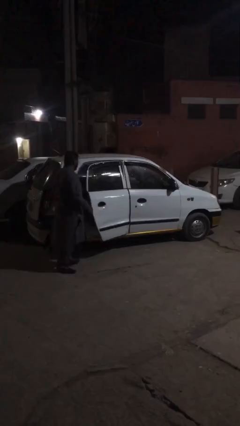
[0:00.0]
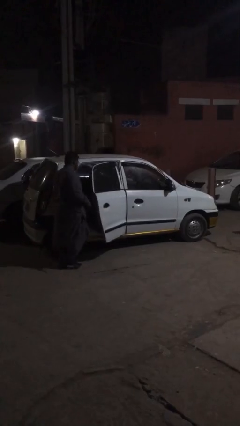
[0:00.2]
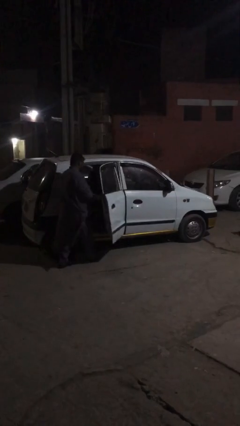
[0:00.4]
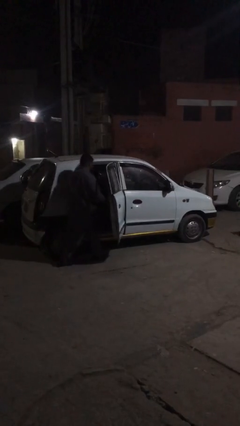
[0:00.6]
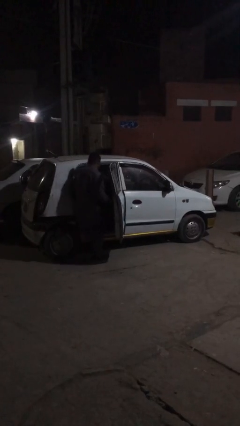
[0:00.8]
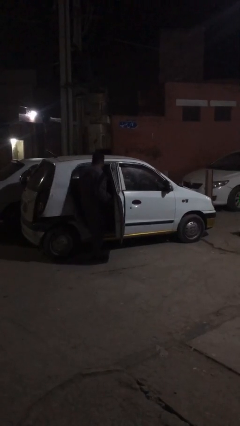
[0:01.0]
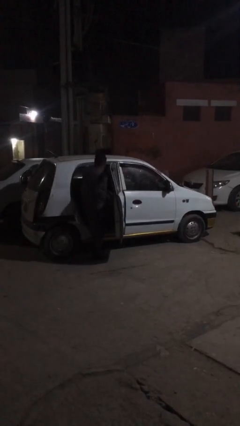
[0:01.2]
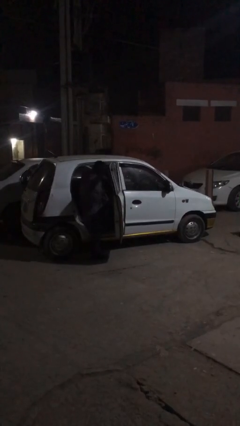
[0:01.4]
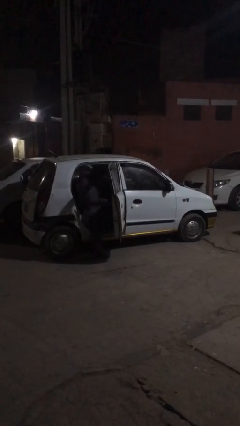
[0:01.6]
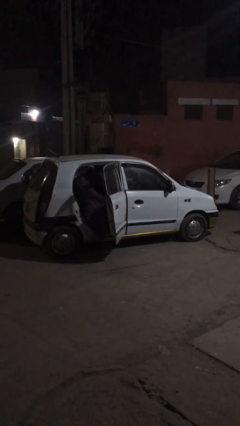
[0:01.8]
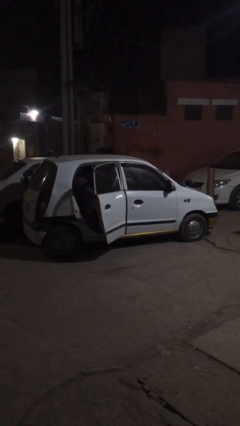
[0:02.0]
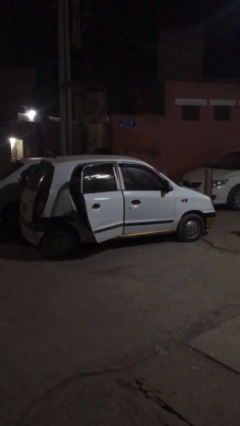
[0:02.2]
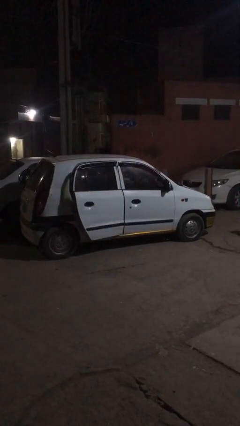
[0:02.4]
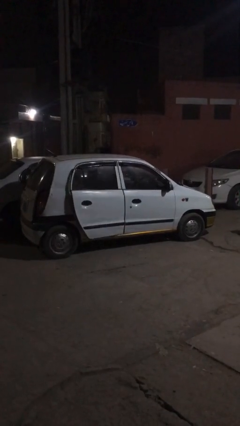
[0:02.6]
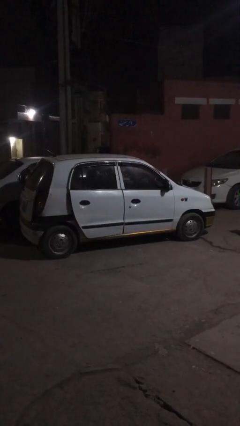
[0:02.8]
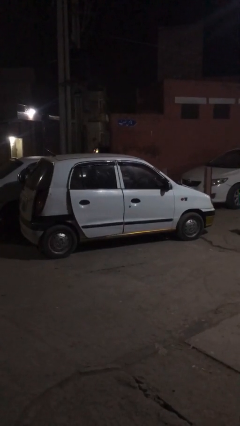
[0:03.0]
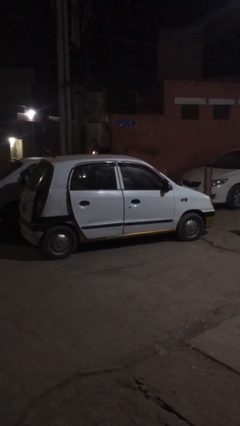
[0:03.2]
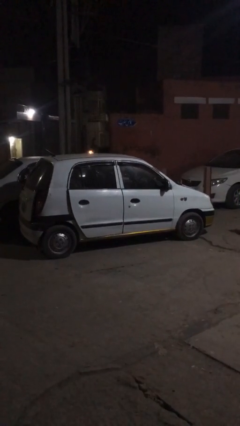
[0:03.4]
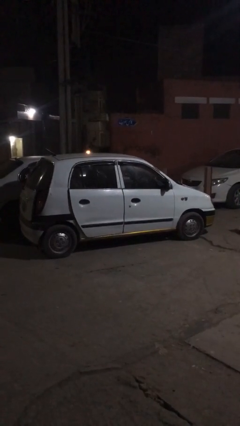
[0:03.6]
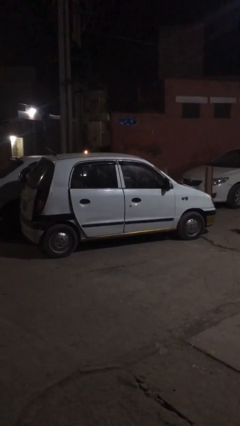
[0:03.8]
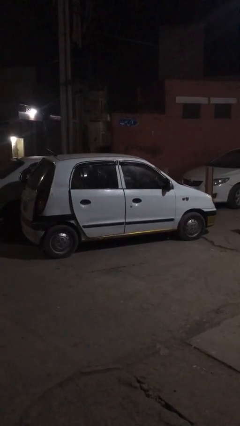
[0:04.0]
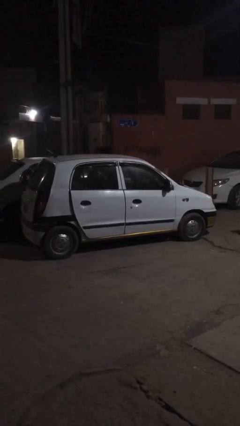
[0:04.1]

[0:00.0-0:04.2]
car picks up person

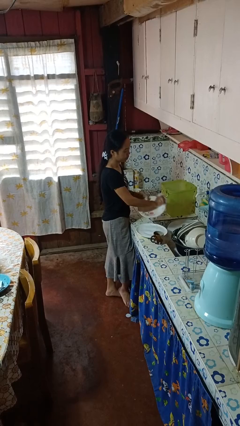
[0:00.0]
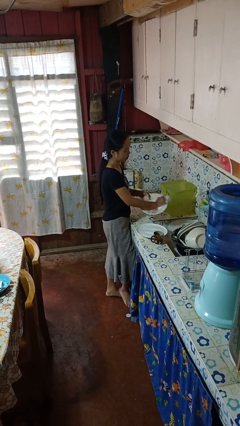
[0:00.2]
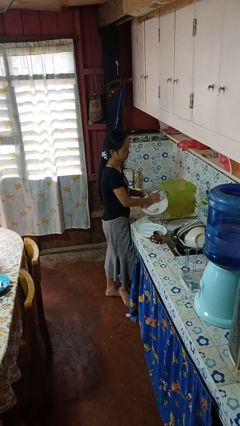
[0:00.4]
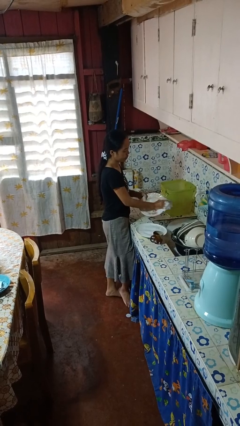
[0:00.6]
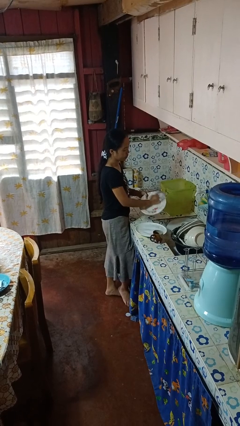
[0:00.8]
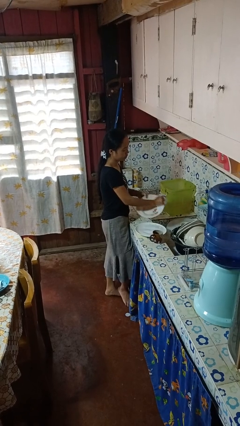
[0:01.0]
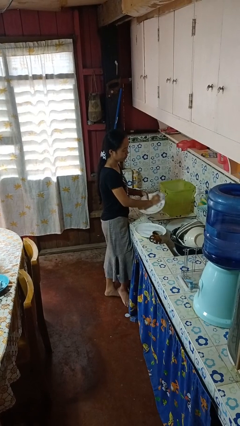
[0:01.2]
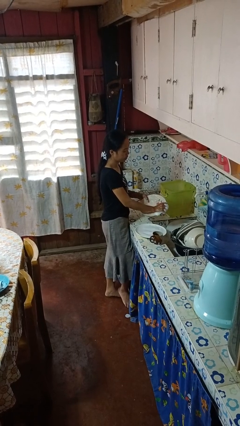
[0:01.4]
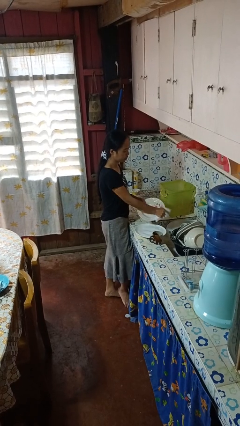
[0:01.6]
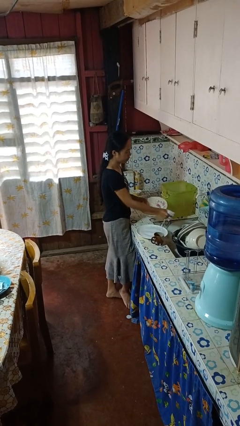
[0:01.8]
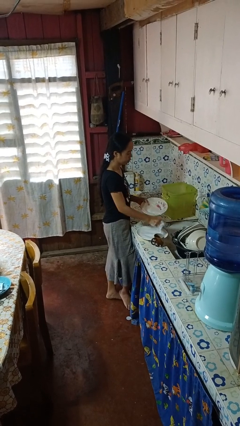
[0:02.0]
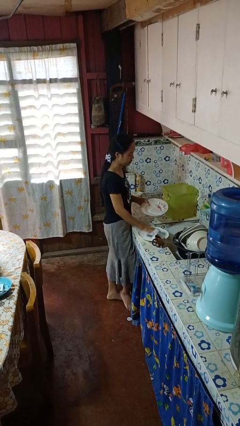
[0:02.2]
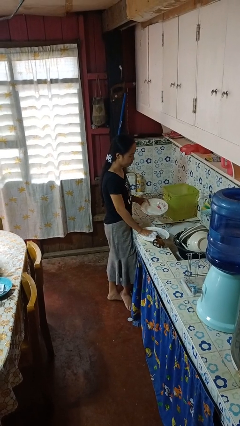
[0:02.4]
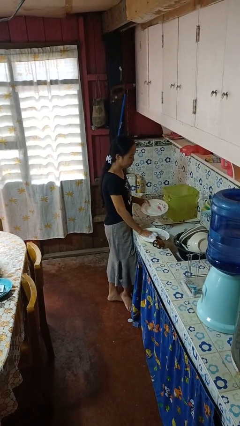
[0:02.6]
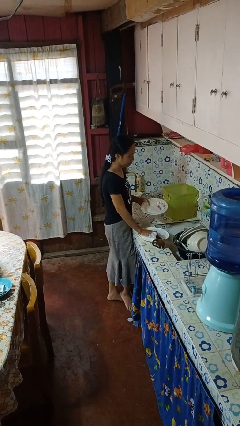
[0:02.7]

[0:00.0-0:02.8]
person washes dish

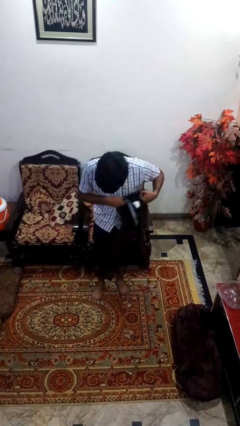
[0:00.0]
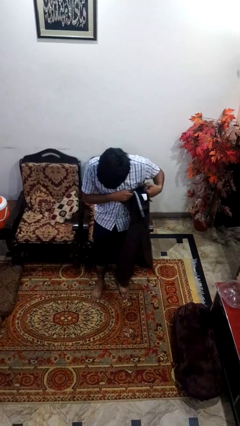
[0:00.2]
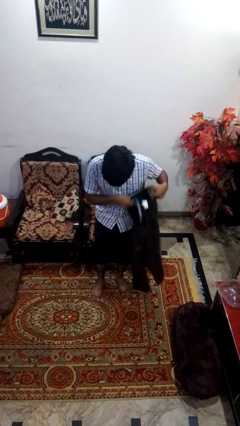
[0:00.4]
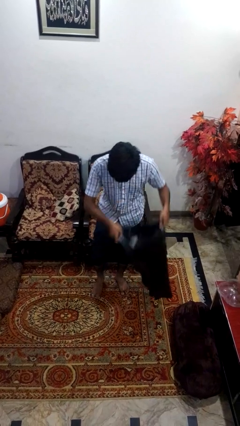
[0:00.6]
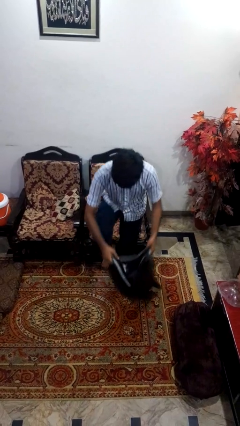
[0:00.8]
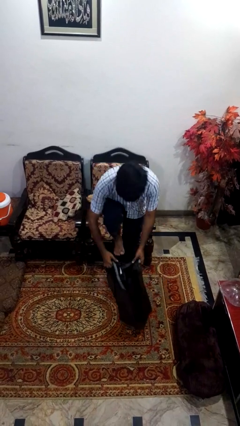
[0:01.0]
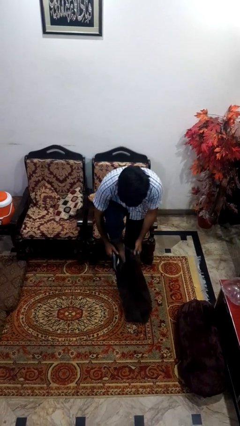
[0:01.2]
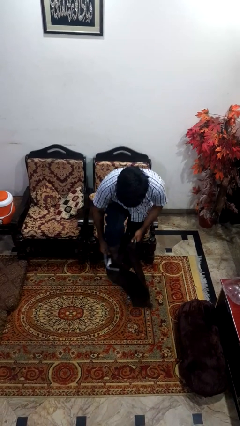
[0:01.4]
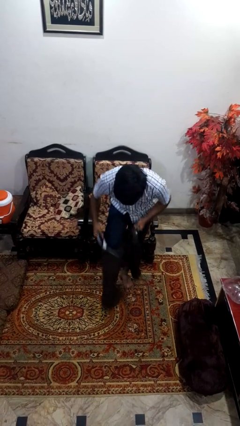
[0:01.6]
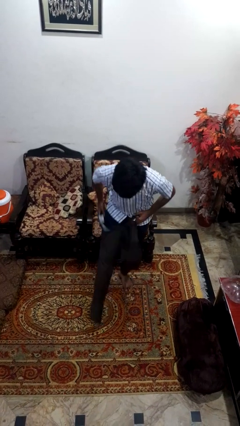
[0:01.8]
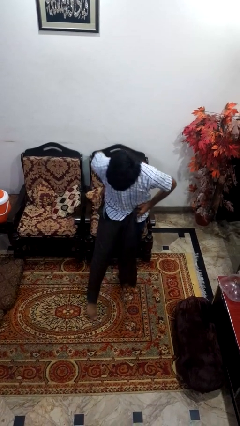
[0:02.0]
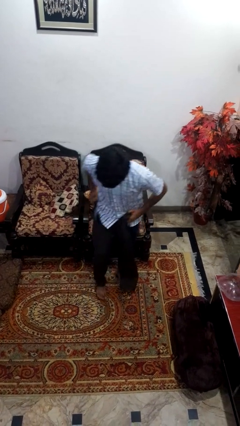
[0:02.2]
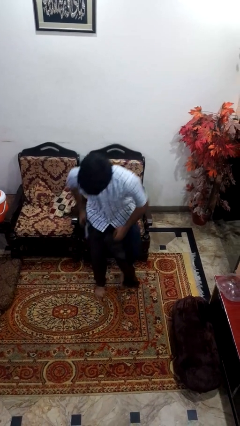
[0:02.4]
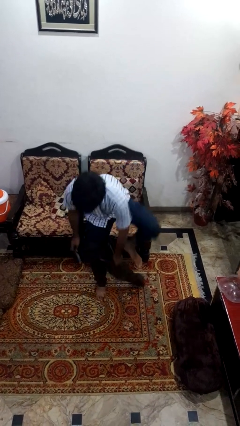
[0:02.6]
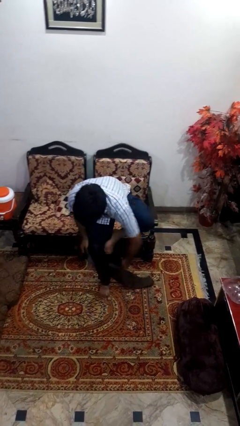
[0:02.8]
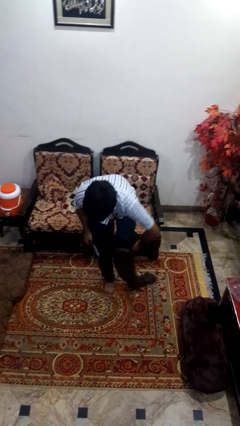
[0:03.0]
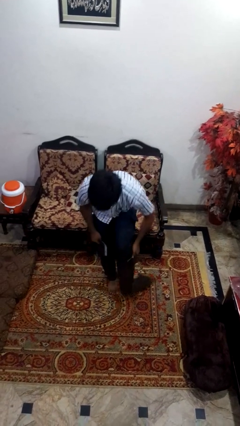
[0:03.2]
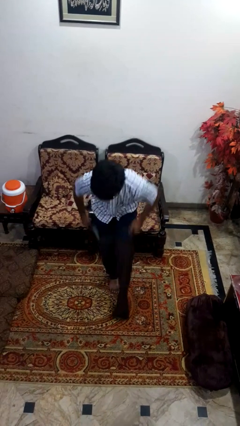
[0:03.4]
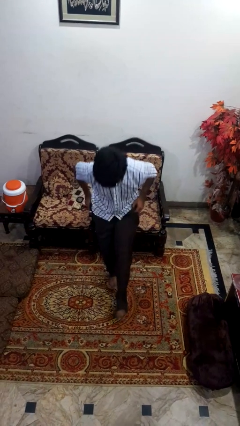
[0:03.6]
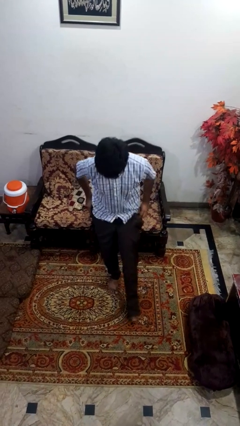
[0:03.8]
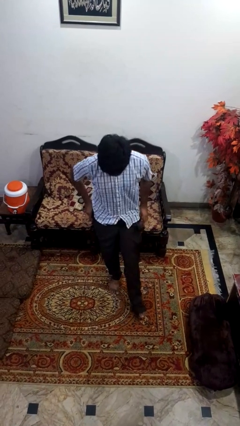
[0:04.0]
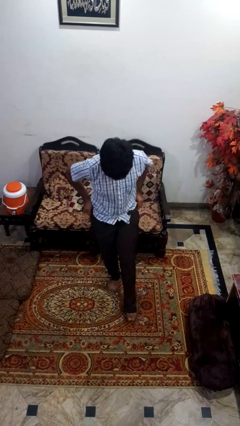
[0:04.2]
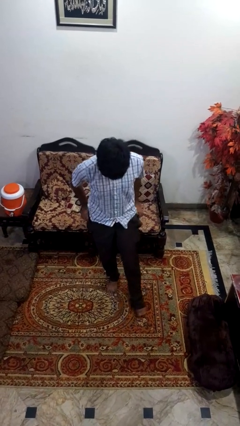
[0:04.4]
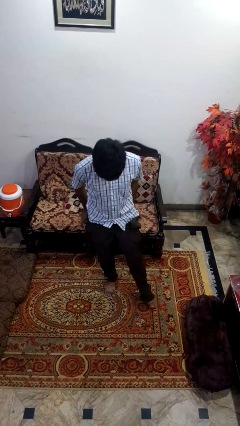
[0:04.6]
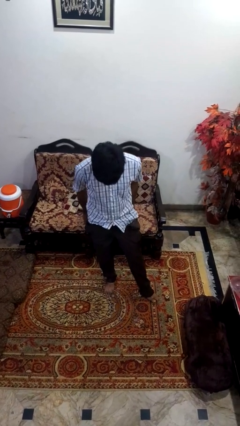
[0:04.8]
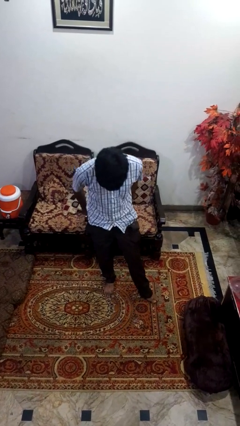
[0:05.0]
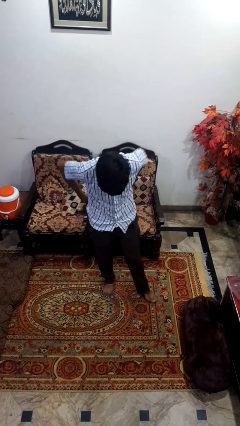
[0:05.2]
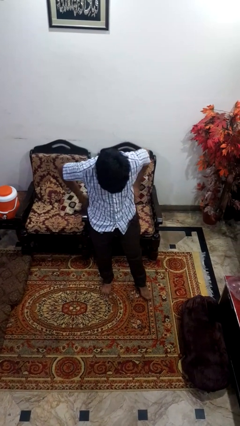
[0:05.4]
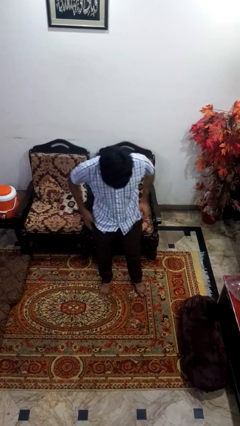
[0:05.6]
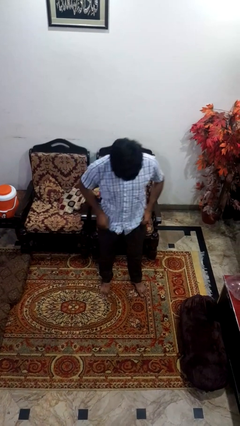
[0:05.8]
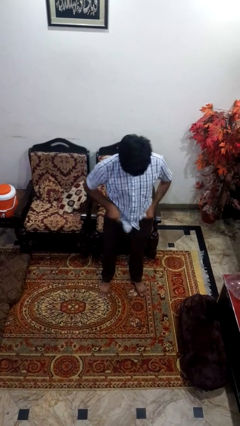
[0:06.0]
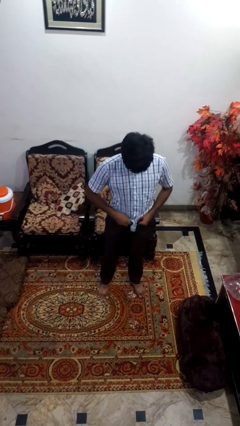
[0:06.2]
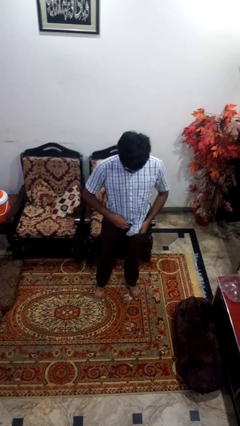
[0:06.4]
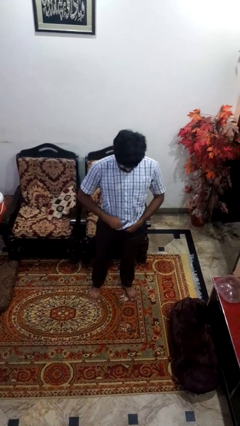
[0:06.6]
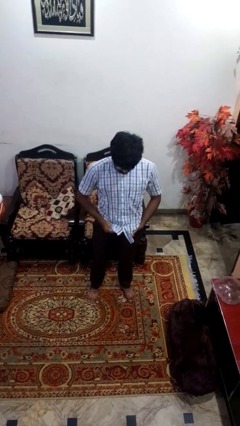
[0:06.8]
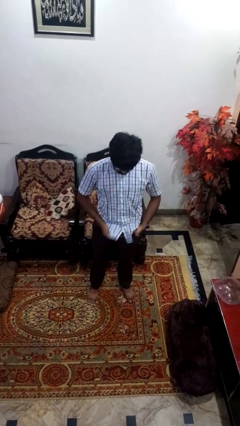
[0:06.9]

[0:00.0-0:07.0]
person puts on pants

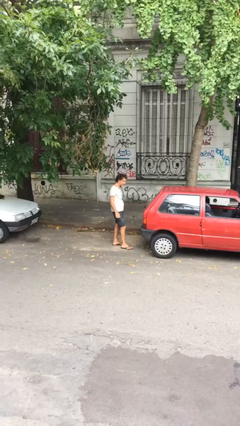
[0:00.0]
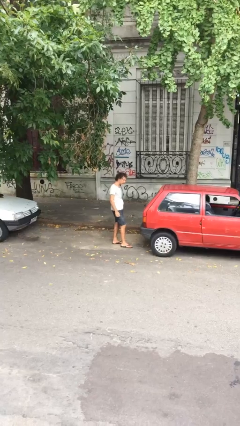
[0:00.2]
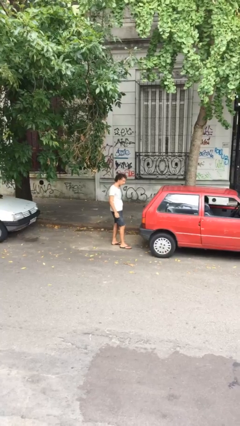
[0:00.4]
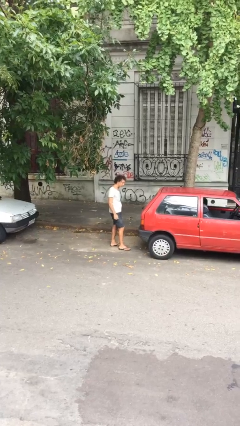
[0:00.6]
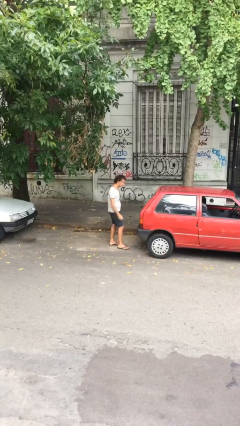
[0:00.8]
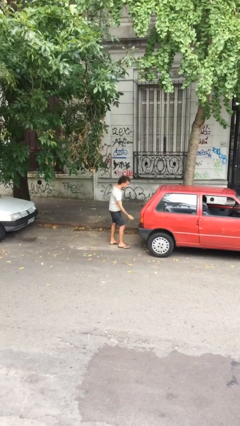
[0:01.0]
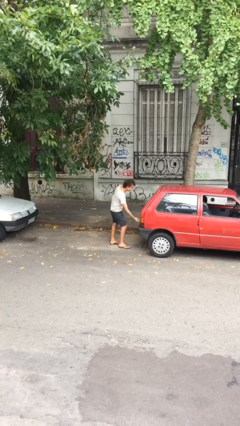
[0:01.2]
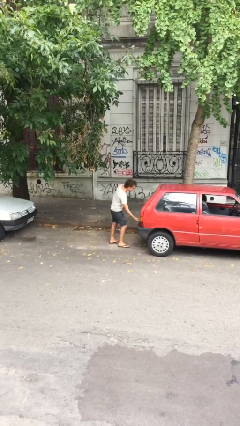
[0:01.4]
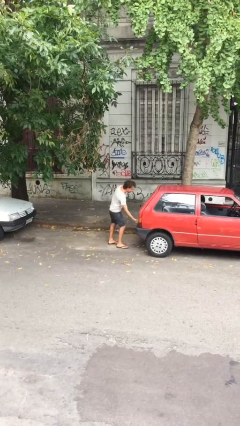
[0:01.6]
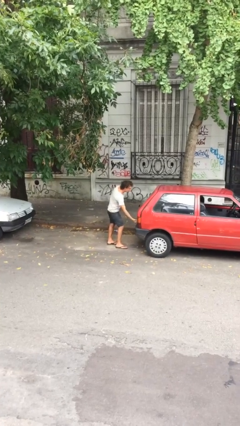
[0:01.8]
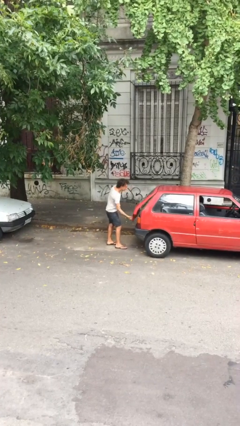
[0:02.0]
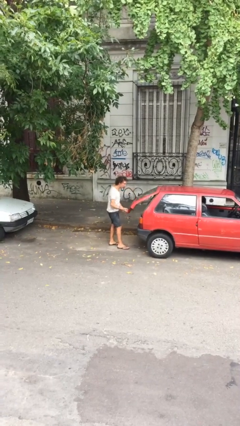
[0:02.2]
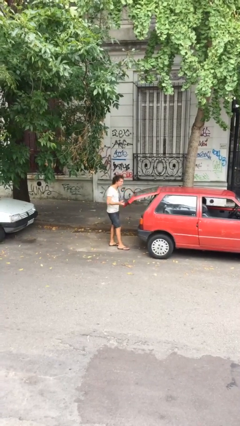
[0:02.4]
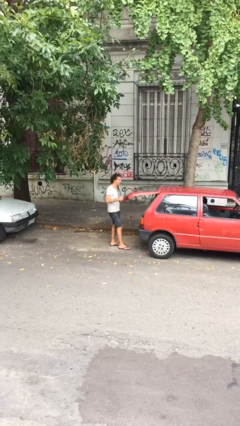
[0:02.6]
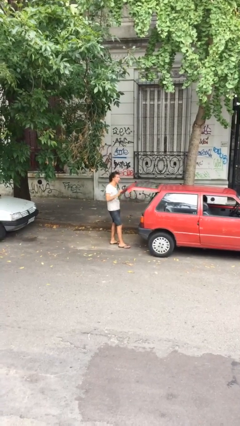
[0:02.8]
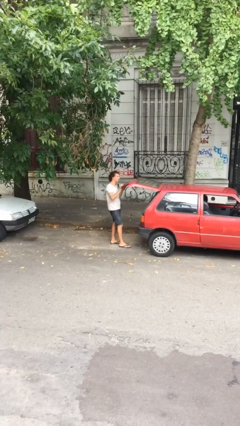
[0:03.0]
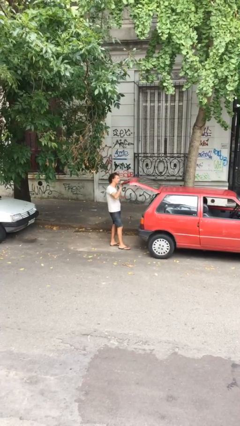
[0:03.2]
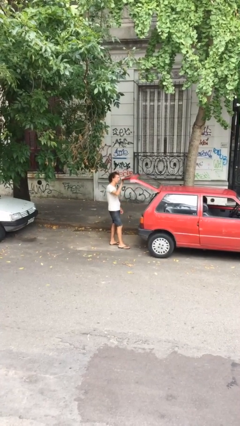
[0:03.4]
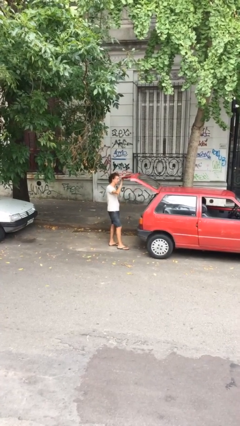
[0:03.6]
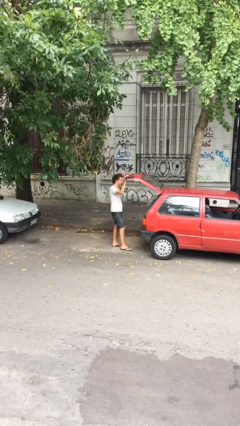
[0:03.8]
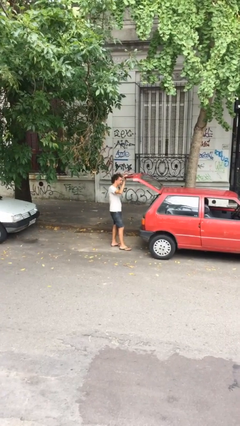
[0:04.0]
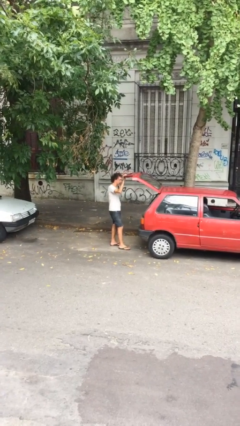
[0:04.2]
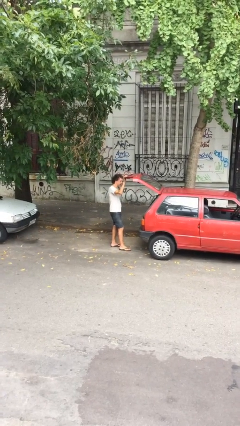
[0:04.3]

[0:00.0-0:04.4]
person opens car trunk
